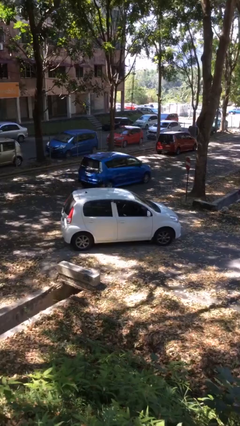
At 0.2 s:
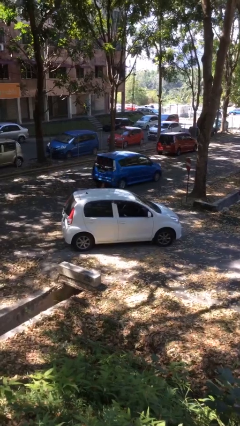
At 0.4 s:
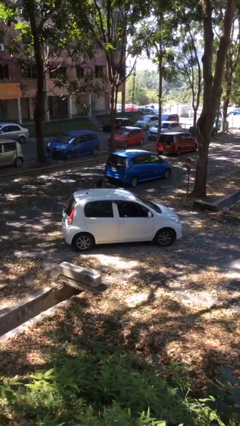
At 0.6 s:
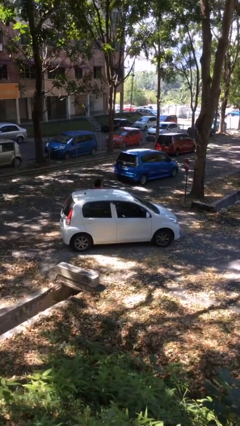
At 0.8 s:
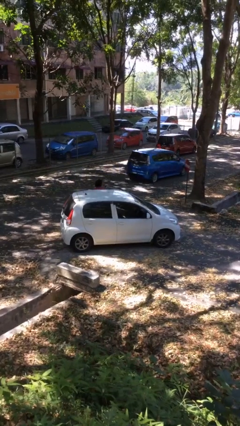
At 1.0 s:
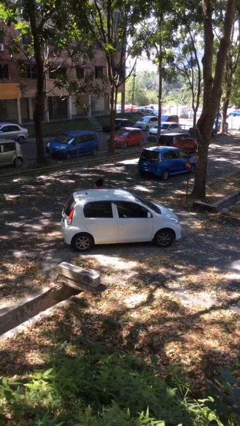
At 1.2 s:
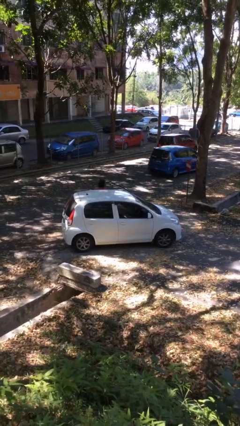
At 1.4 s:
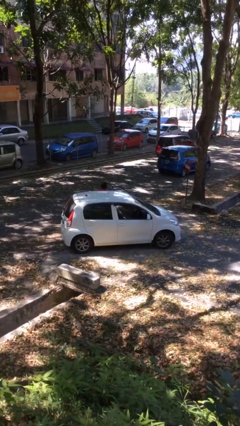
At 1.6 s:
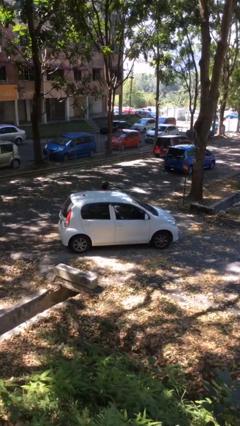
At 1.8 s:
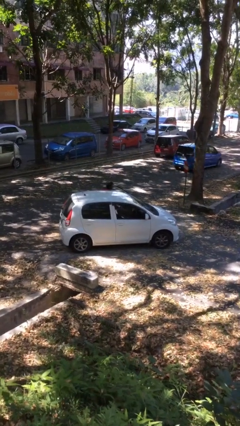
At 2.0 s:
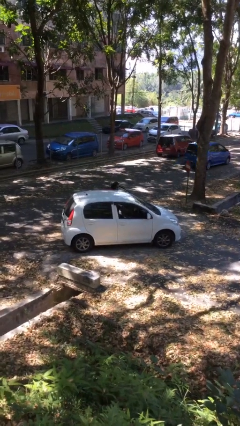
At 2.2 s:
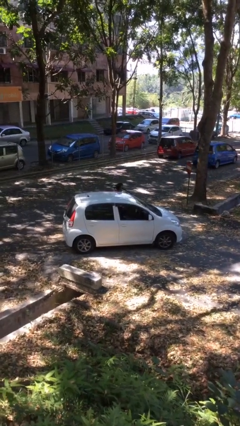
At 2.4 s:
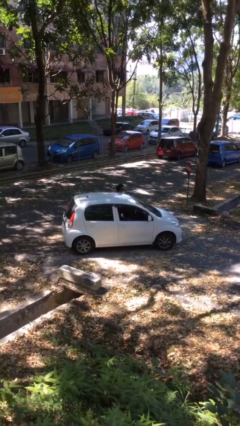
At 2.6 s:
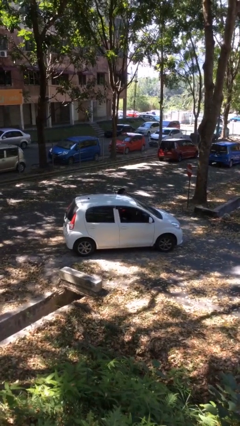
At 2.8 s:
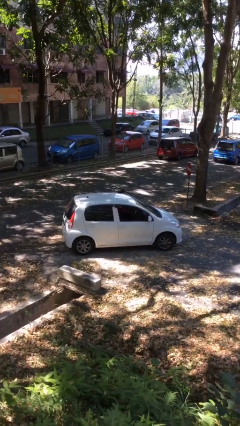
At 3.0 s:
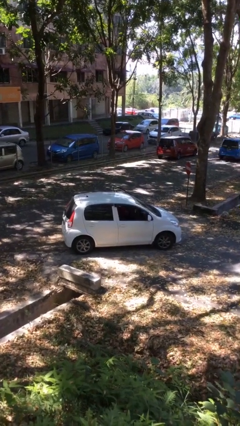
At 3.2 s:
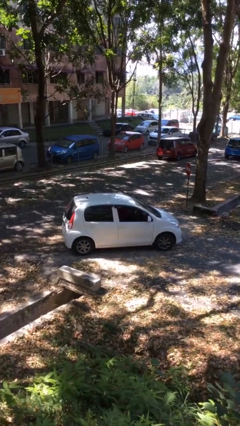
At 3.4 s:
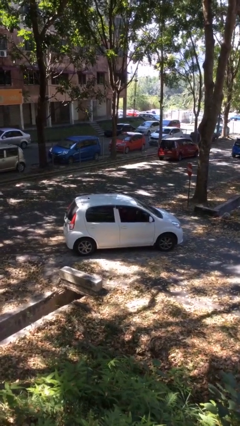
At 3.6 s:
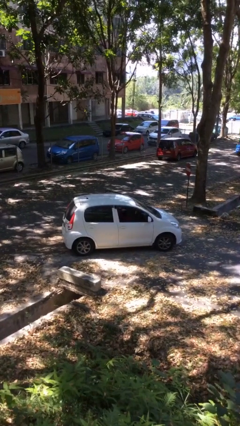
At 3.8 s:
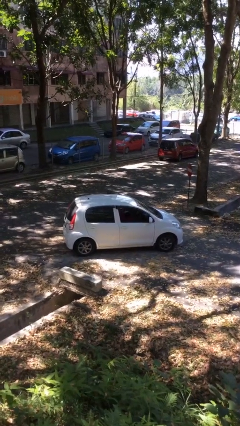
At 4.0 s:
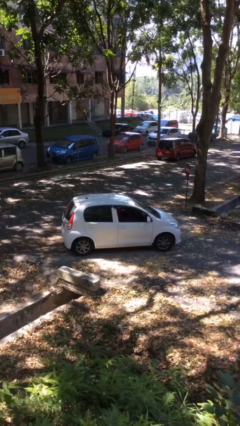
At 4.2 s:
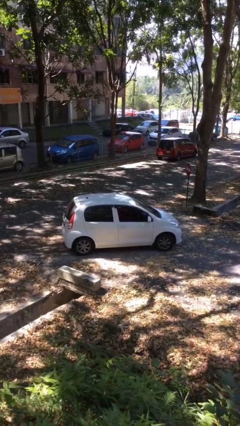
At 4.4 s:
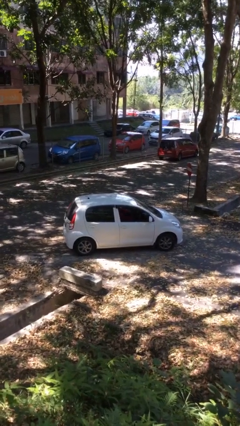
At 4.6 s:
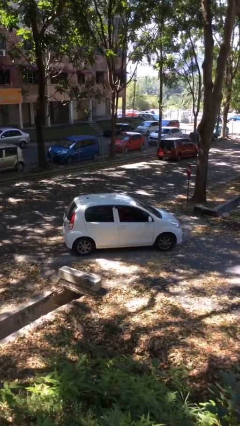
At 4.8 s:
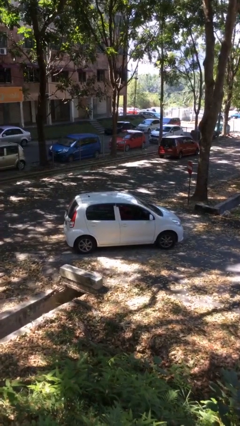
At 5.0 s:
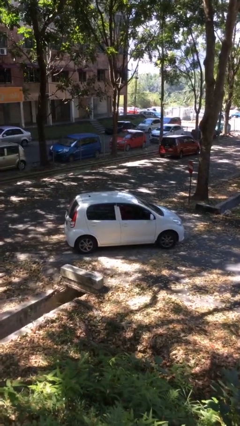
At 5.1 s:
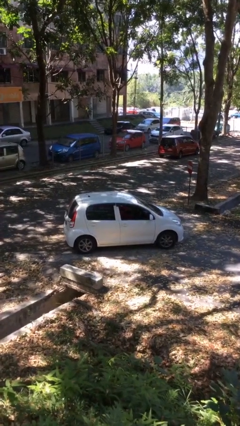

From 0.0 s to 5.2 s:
car picks up person

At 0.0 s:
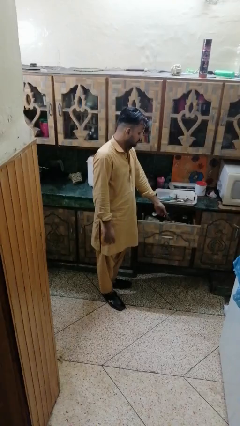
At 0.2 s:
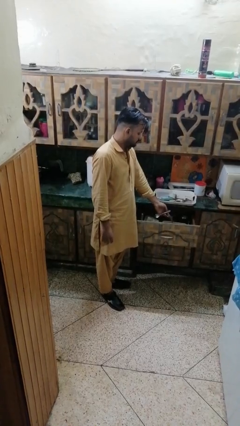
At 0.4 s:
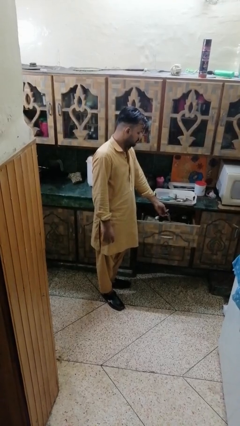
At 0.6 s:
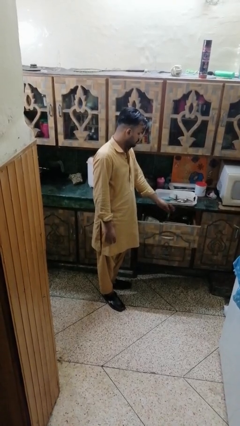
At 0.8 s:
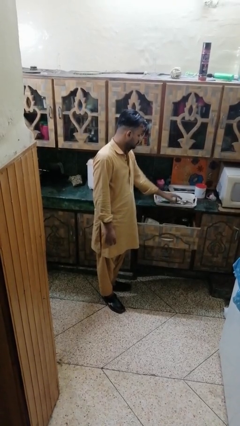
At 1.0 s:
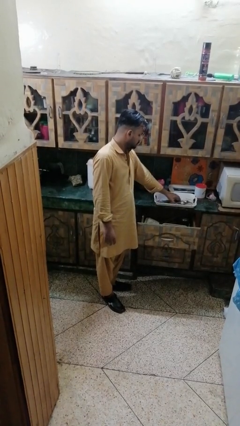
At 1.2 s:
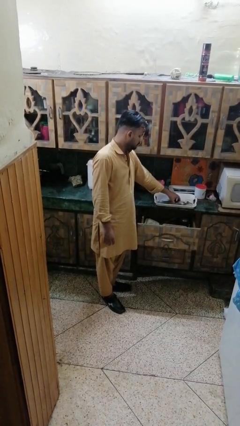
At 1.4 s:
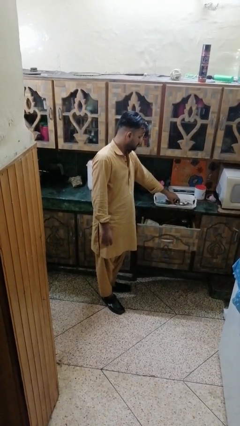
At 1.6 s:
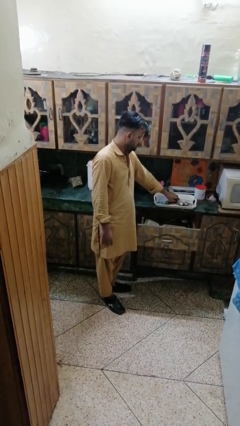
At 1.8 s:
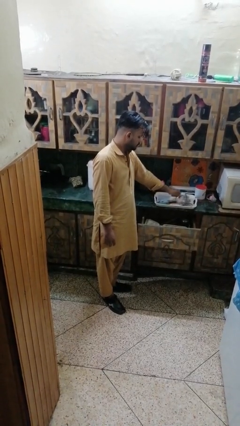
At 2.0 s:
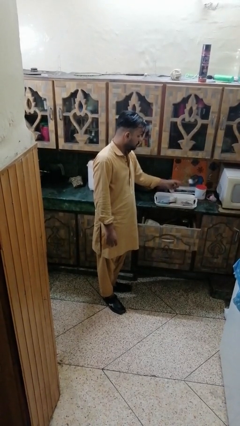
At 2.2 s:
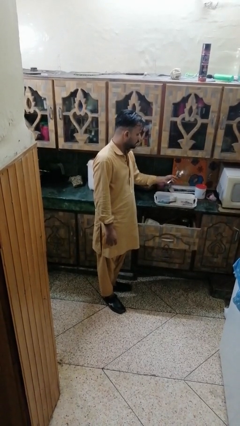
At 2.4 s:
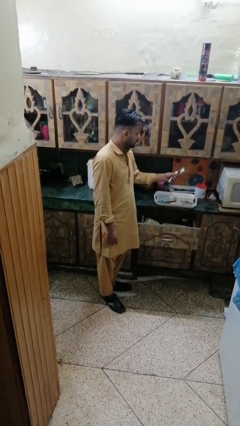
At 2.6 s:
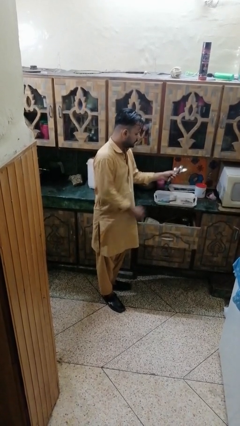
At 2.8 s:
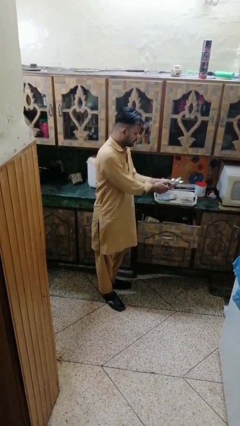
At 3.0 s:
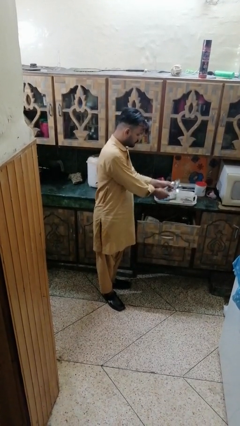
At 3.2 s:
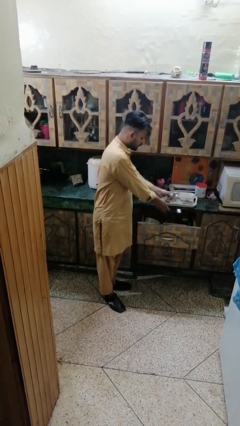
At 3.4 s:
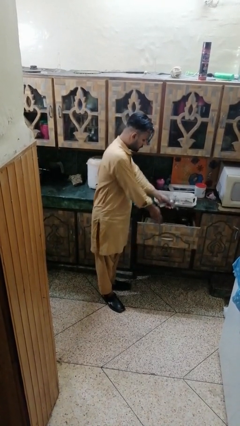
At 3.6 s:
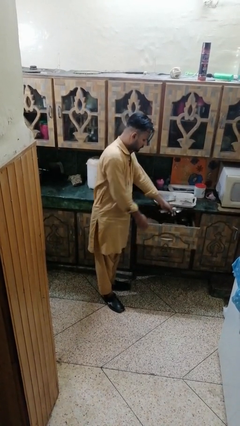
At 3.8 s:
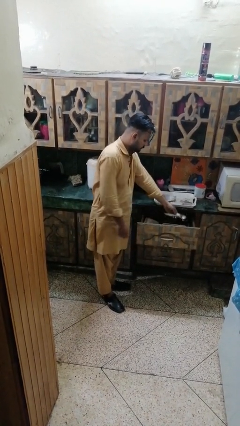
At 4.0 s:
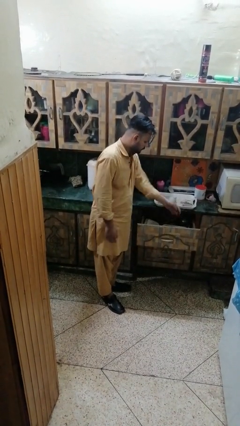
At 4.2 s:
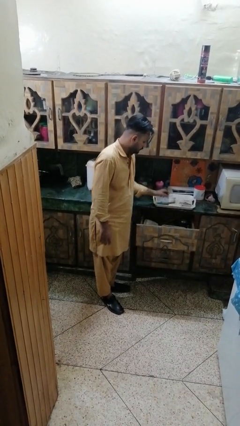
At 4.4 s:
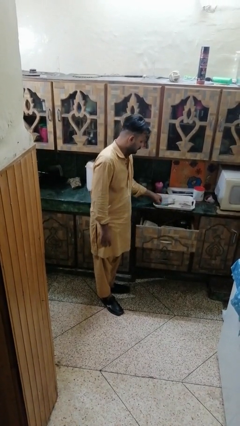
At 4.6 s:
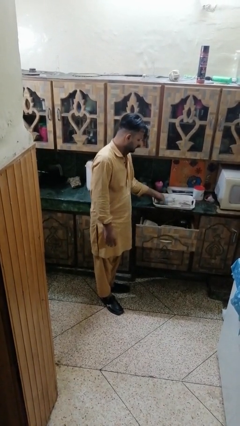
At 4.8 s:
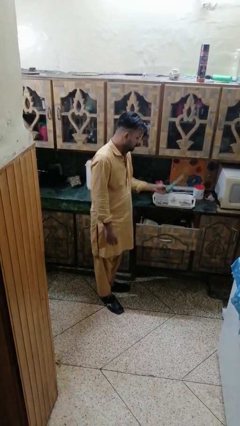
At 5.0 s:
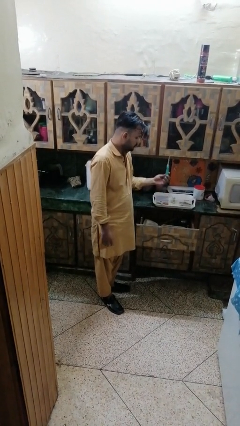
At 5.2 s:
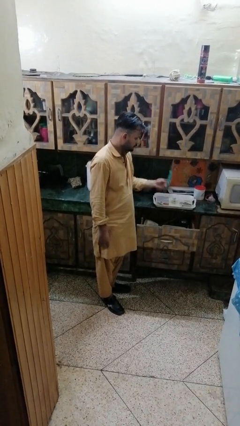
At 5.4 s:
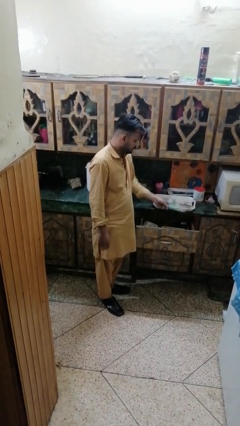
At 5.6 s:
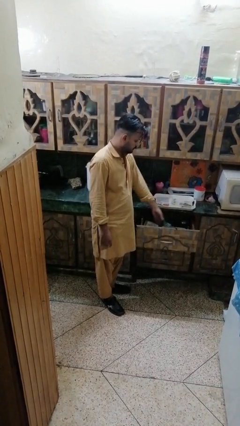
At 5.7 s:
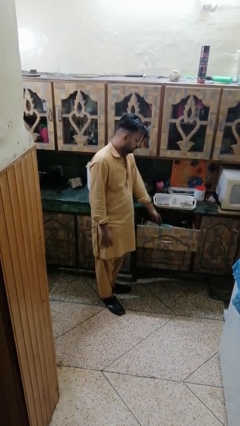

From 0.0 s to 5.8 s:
person puts object into kitchen drawer

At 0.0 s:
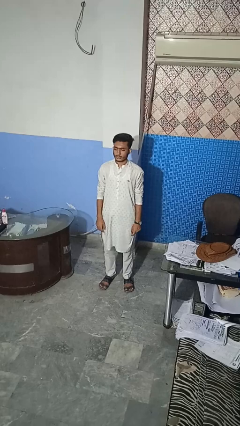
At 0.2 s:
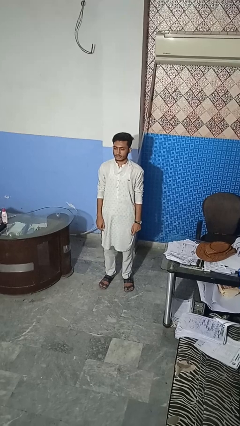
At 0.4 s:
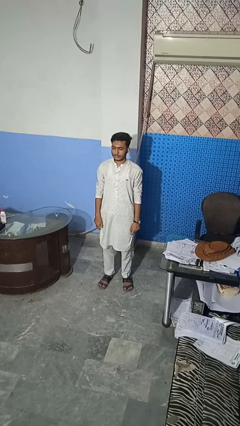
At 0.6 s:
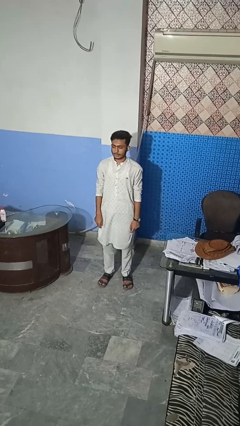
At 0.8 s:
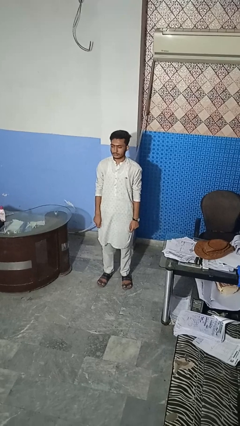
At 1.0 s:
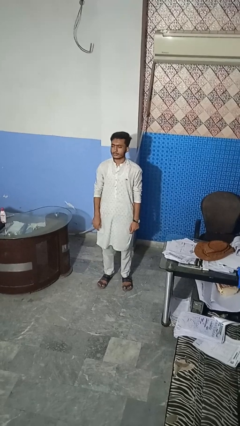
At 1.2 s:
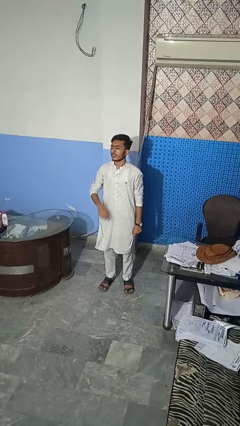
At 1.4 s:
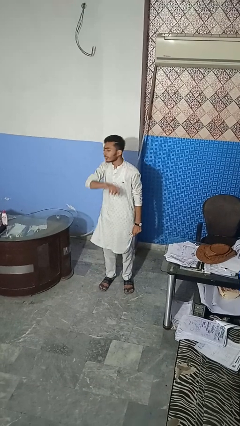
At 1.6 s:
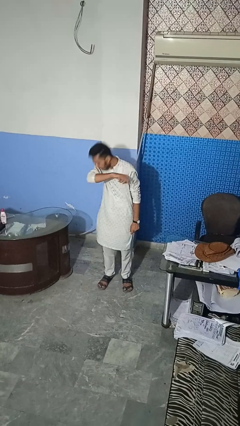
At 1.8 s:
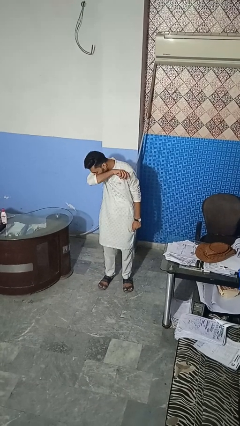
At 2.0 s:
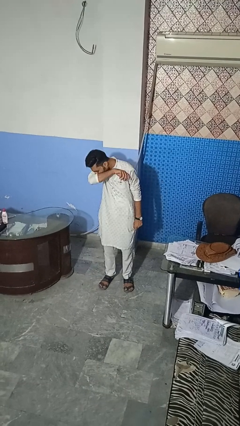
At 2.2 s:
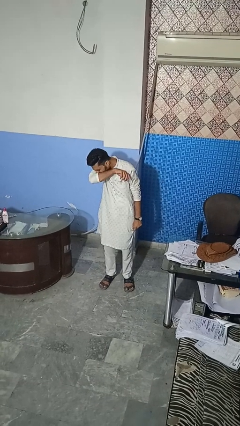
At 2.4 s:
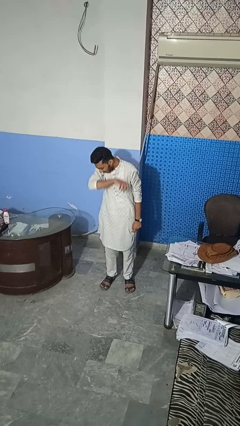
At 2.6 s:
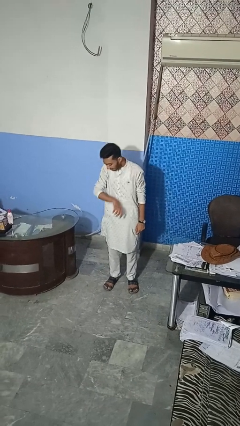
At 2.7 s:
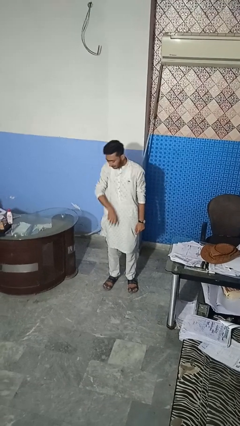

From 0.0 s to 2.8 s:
person sneezes into arm

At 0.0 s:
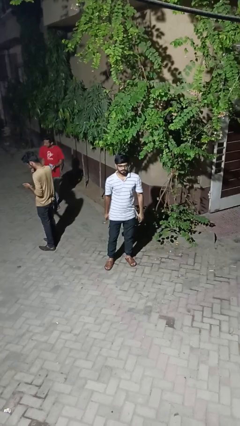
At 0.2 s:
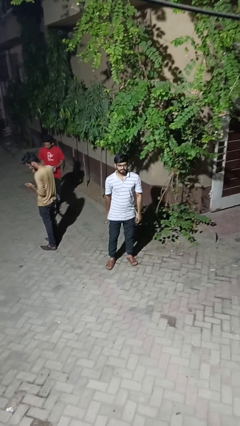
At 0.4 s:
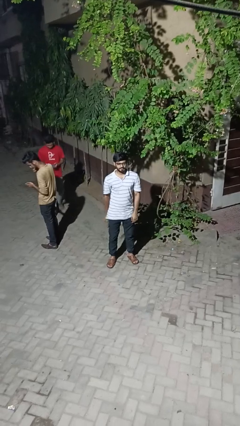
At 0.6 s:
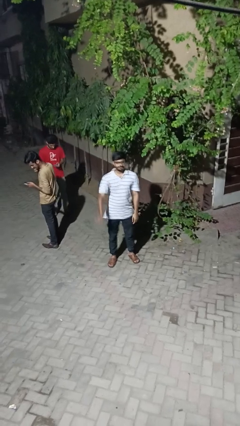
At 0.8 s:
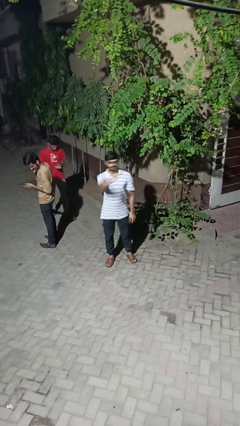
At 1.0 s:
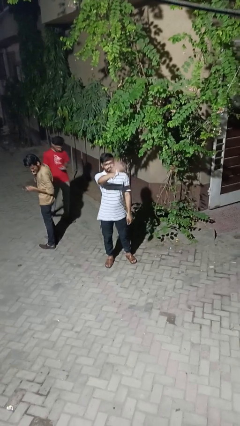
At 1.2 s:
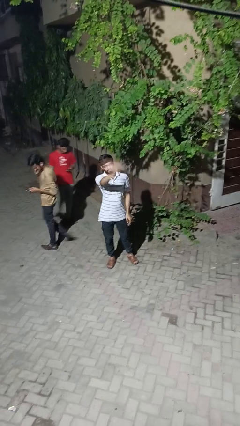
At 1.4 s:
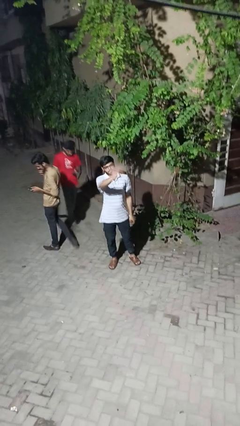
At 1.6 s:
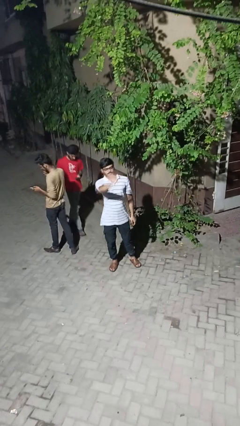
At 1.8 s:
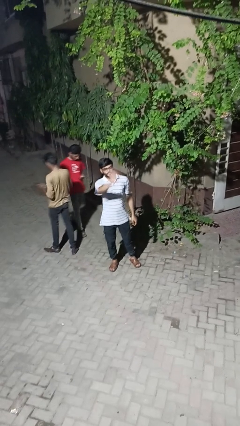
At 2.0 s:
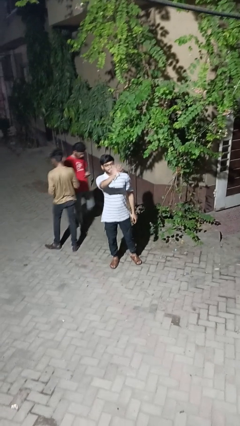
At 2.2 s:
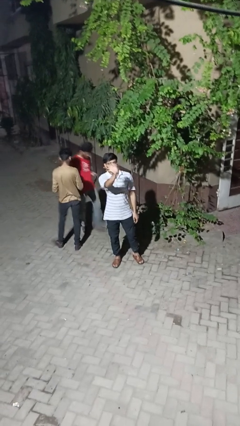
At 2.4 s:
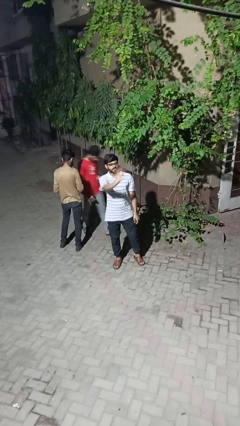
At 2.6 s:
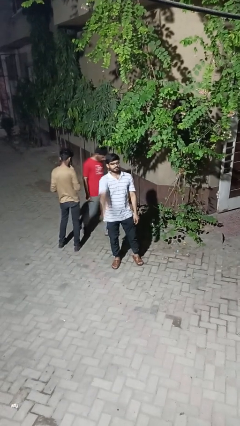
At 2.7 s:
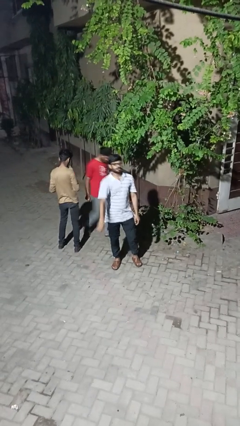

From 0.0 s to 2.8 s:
person waves at person

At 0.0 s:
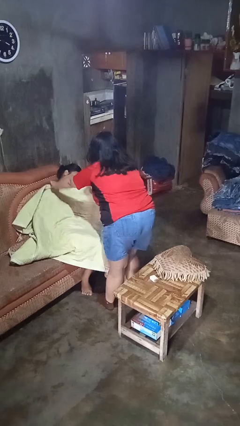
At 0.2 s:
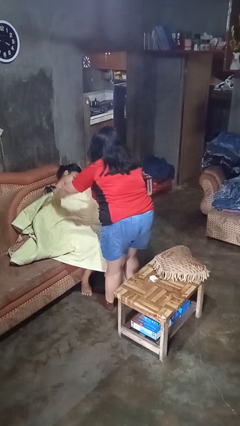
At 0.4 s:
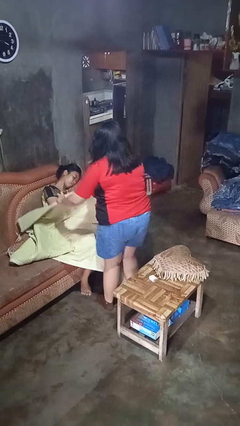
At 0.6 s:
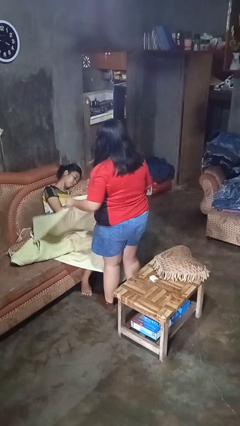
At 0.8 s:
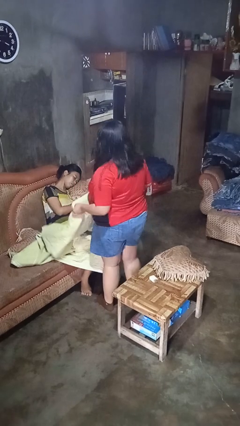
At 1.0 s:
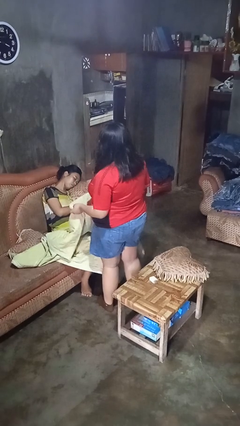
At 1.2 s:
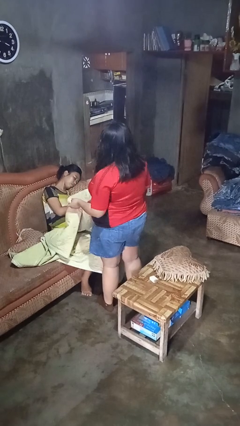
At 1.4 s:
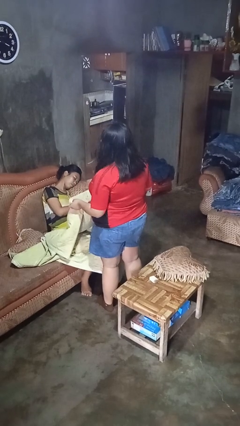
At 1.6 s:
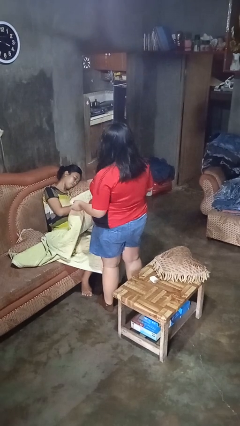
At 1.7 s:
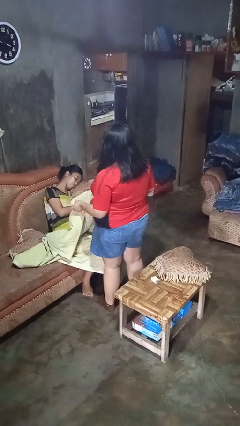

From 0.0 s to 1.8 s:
person uncovers friend with blanket
